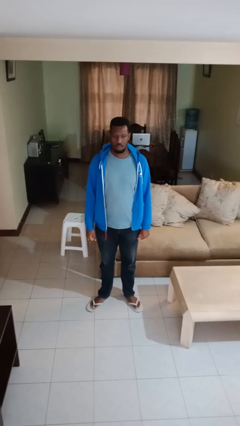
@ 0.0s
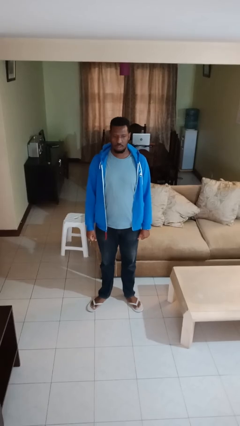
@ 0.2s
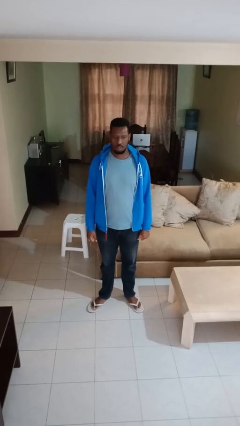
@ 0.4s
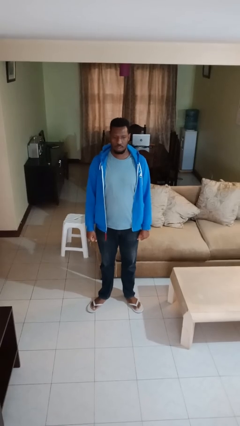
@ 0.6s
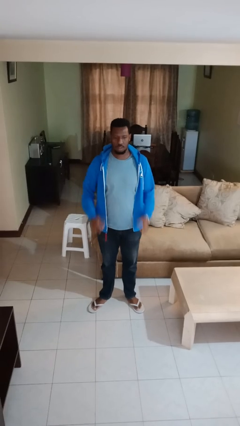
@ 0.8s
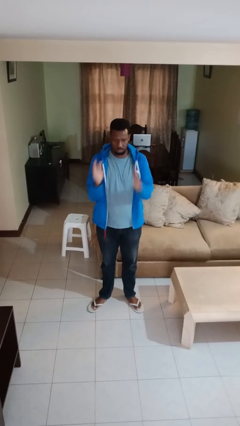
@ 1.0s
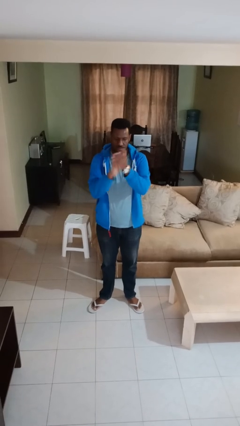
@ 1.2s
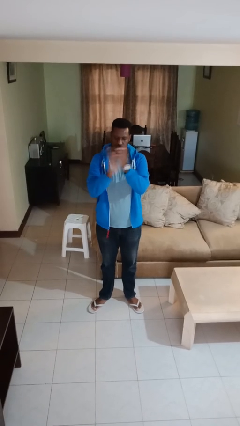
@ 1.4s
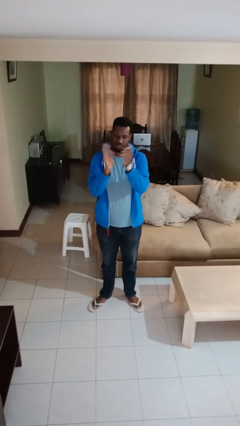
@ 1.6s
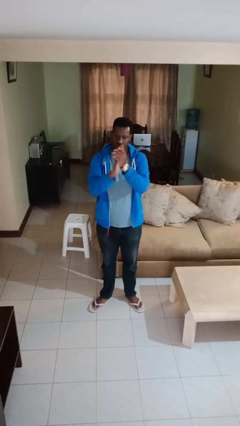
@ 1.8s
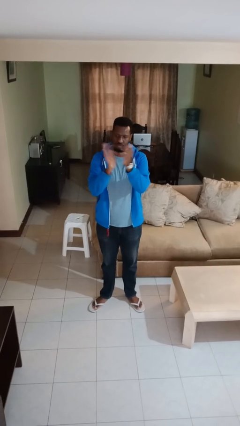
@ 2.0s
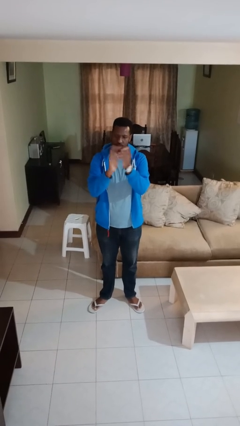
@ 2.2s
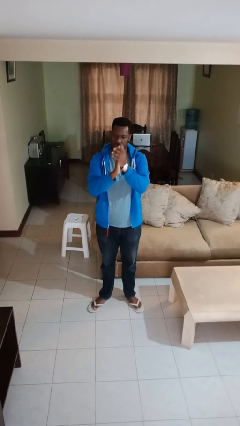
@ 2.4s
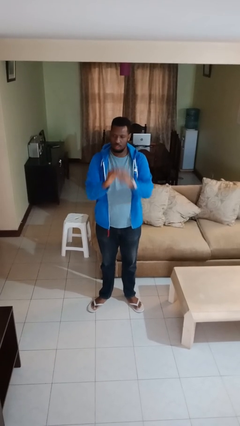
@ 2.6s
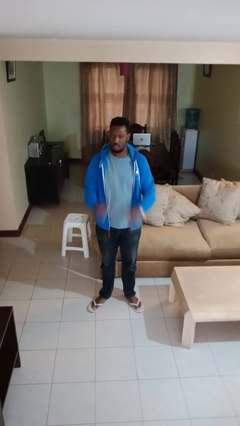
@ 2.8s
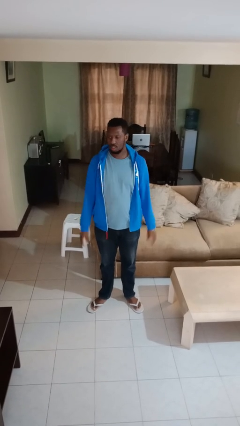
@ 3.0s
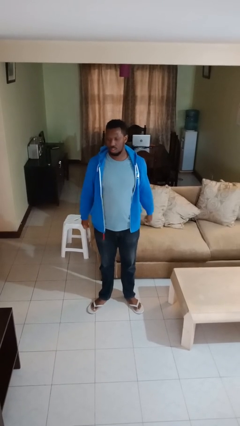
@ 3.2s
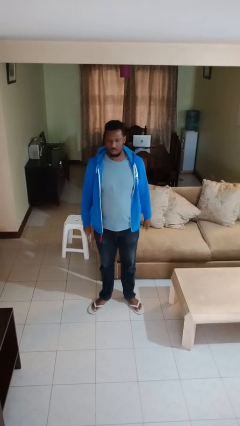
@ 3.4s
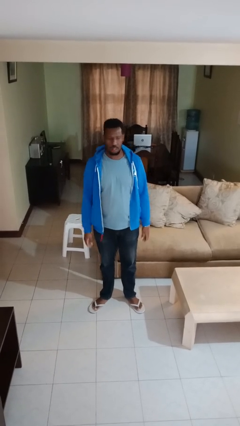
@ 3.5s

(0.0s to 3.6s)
person claps hands

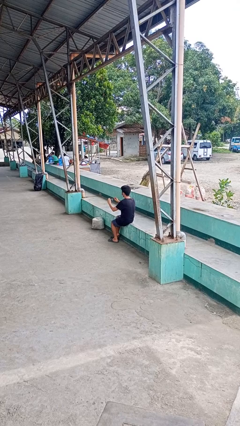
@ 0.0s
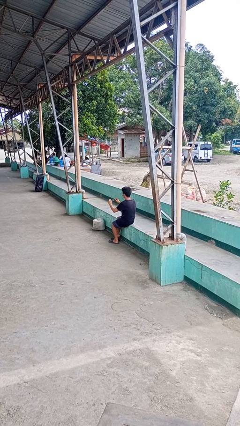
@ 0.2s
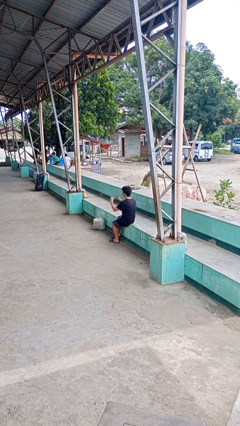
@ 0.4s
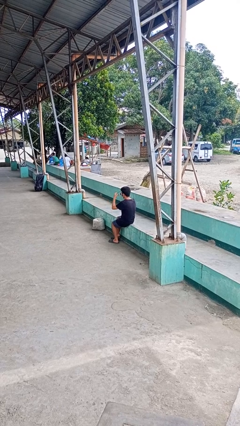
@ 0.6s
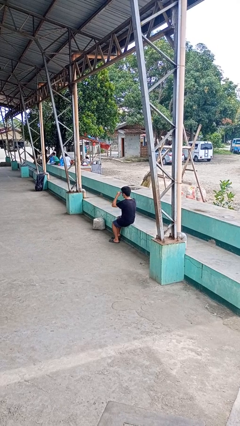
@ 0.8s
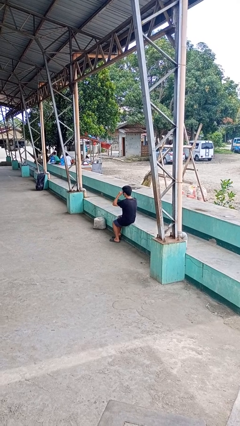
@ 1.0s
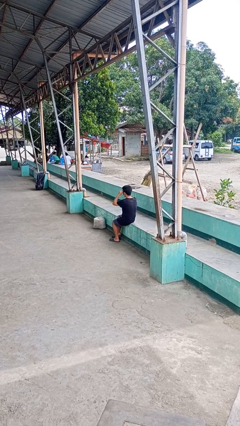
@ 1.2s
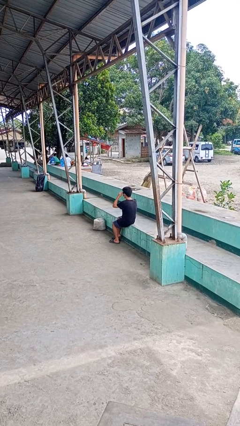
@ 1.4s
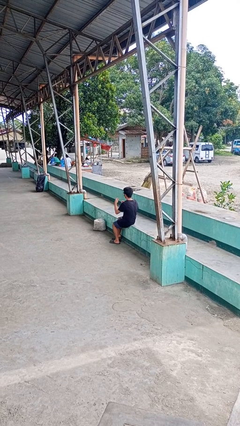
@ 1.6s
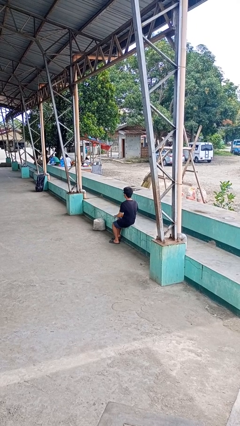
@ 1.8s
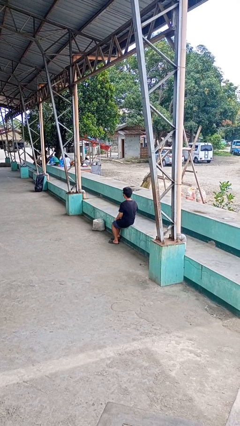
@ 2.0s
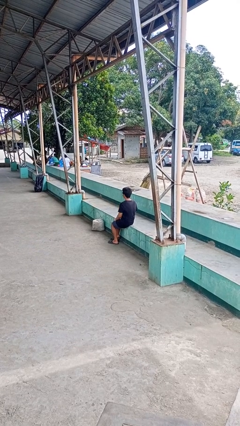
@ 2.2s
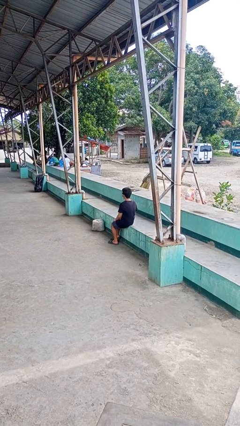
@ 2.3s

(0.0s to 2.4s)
person puts on sunglasses

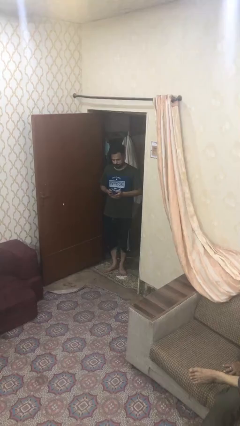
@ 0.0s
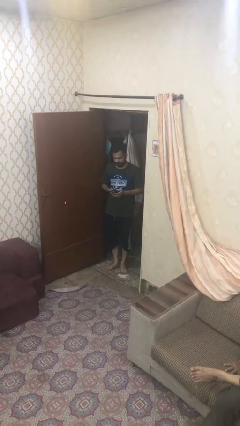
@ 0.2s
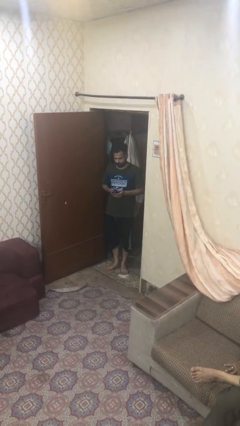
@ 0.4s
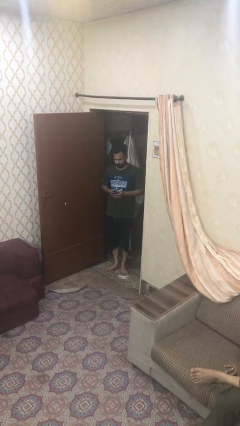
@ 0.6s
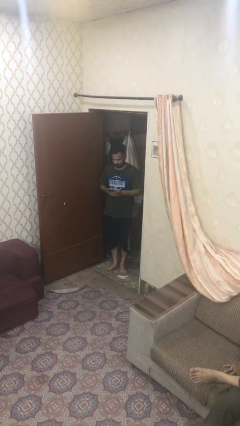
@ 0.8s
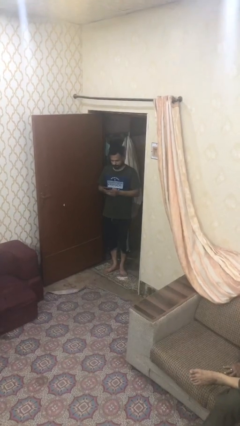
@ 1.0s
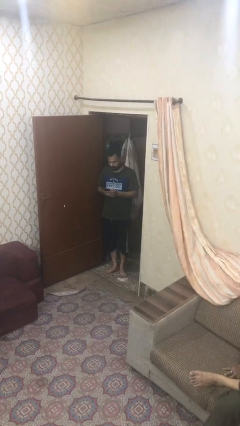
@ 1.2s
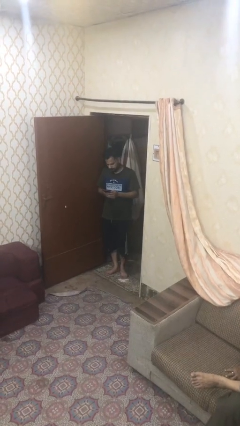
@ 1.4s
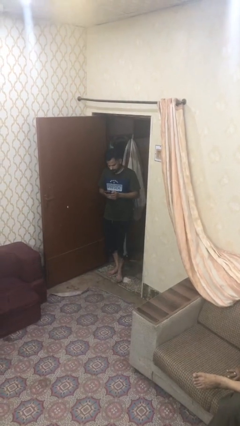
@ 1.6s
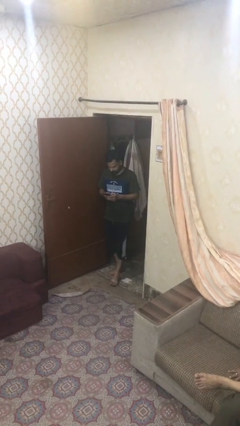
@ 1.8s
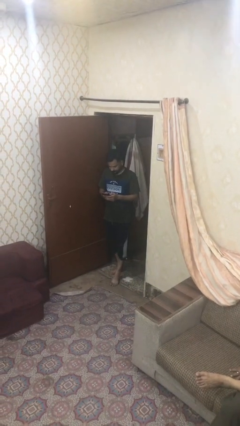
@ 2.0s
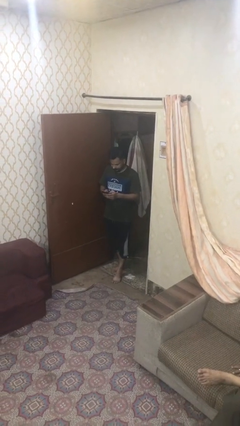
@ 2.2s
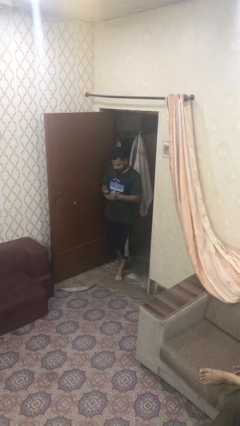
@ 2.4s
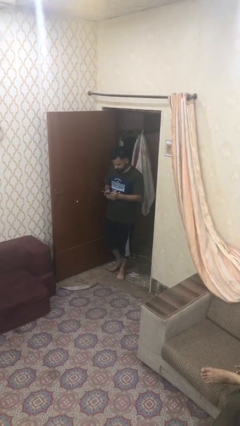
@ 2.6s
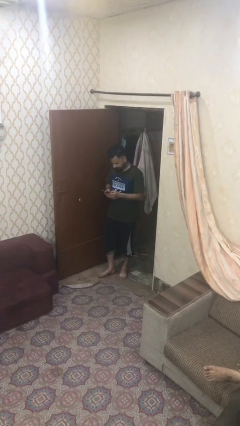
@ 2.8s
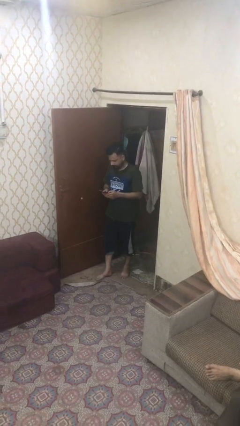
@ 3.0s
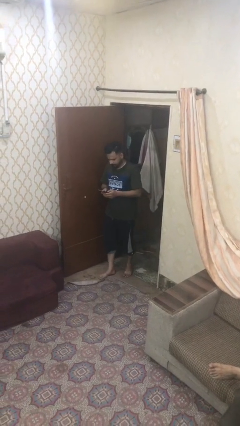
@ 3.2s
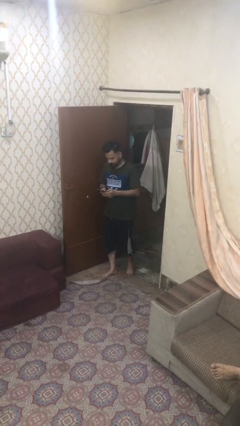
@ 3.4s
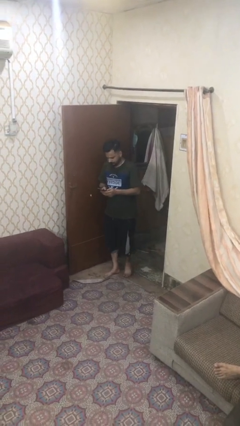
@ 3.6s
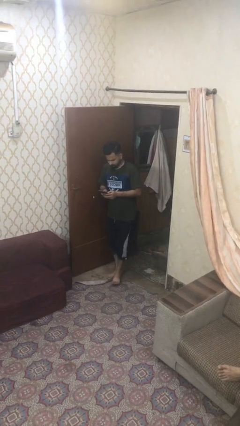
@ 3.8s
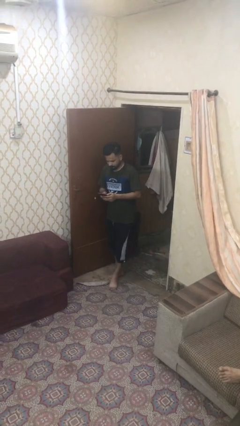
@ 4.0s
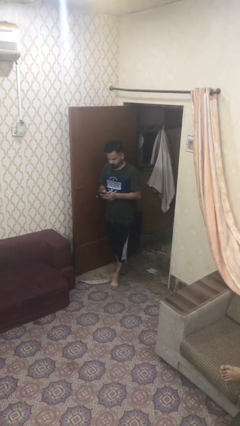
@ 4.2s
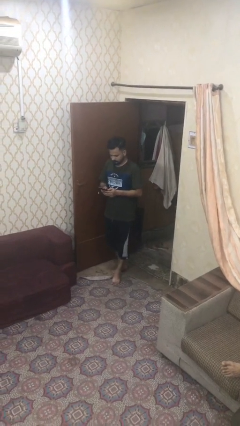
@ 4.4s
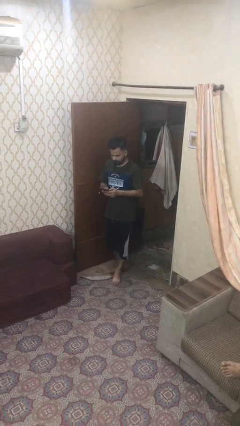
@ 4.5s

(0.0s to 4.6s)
person texts on phone

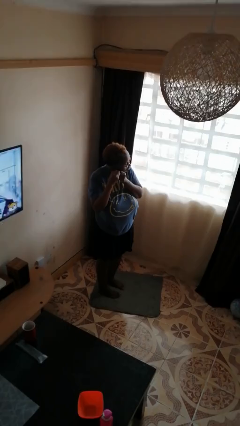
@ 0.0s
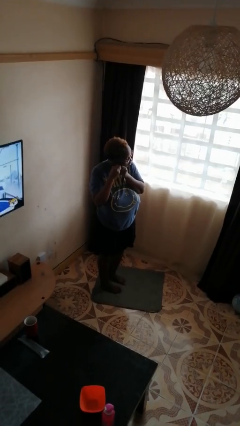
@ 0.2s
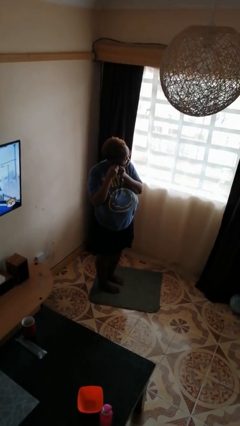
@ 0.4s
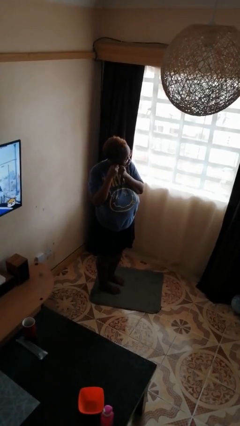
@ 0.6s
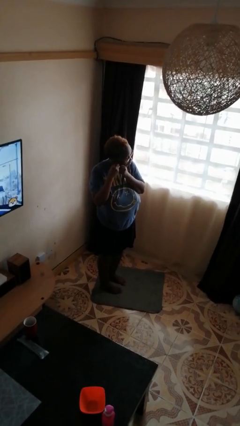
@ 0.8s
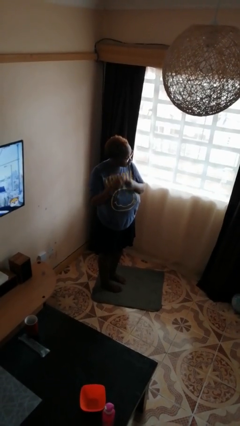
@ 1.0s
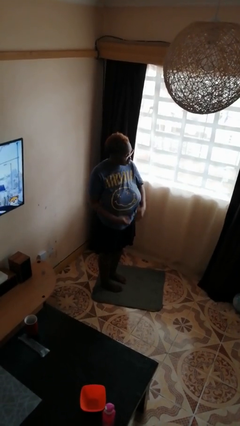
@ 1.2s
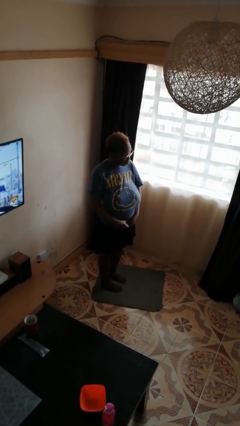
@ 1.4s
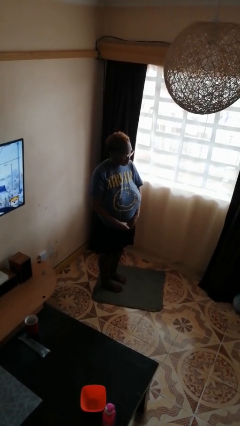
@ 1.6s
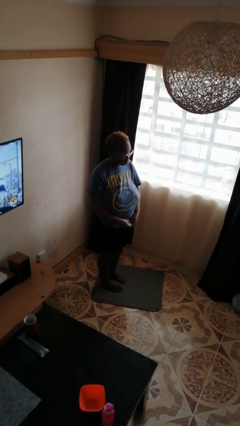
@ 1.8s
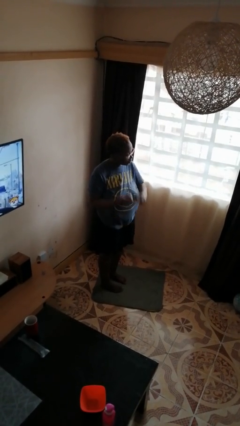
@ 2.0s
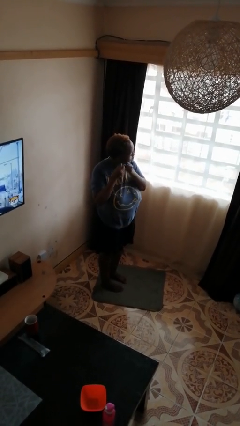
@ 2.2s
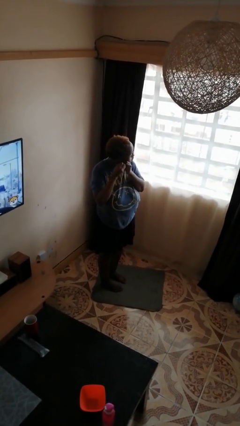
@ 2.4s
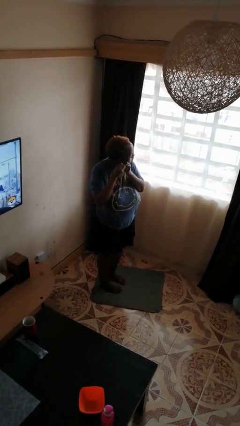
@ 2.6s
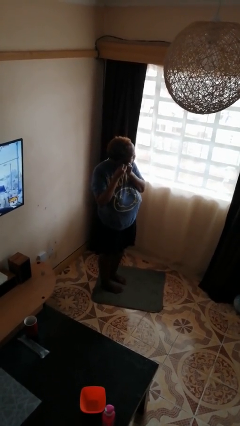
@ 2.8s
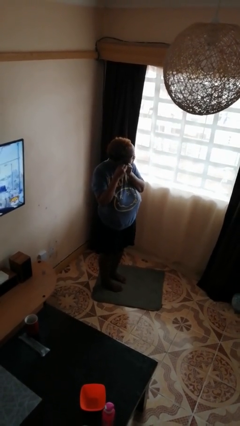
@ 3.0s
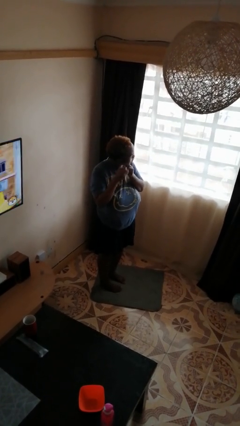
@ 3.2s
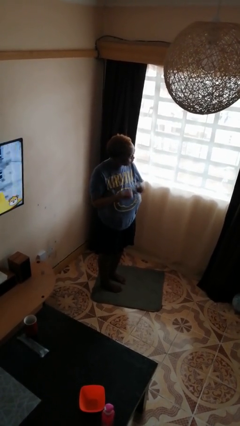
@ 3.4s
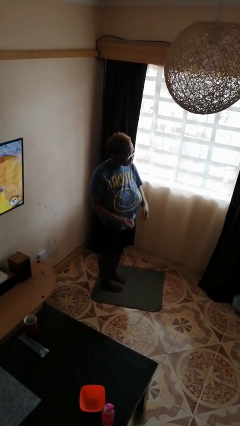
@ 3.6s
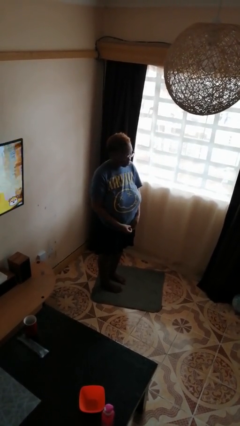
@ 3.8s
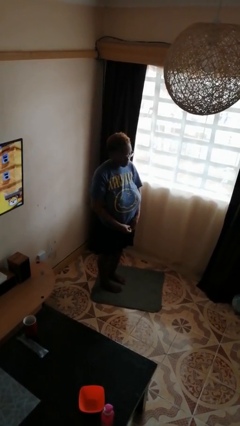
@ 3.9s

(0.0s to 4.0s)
person takes off earrings

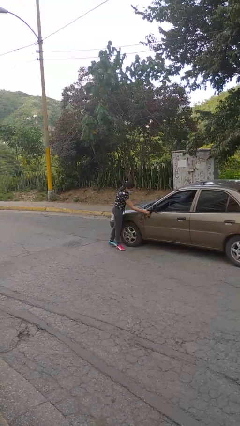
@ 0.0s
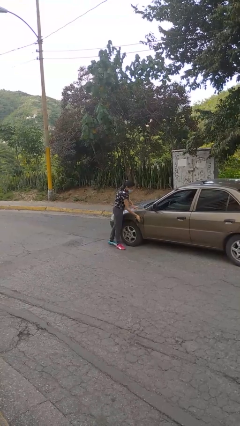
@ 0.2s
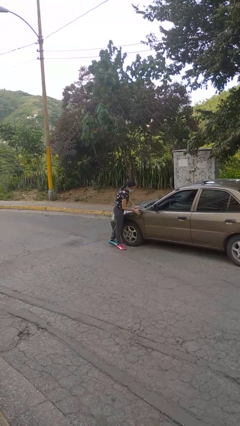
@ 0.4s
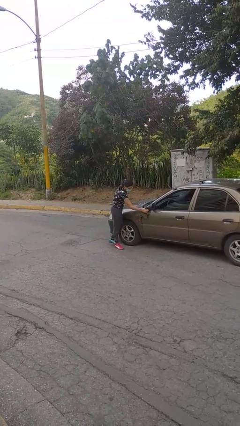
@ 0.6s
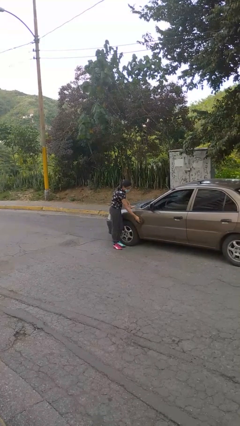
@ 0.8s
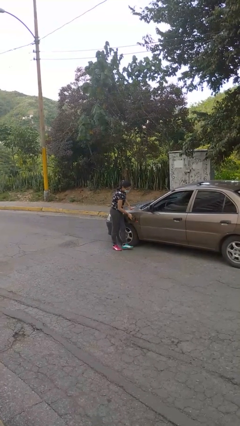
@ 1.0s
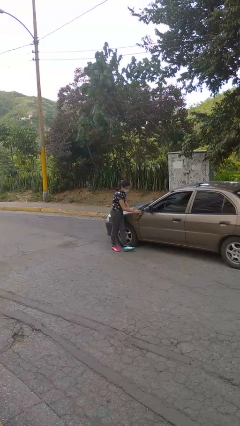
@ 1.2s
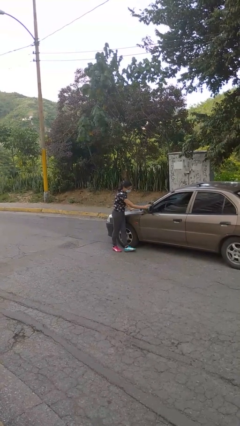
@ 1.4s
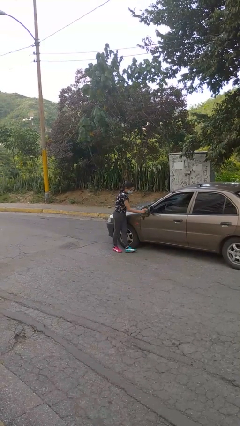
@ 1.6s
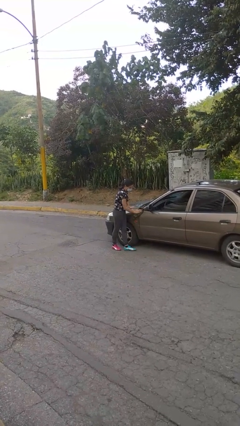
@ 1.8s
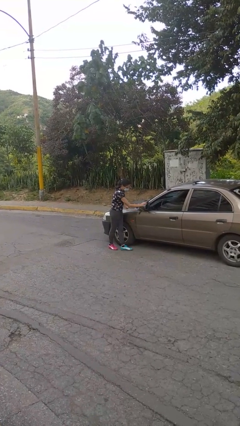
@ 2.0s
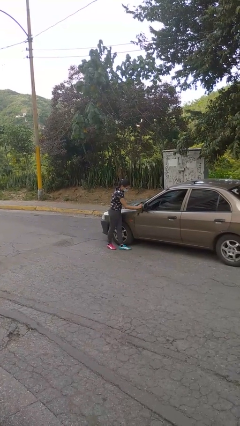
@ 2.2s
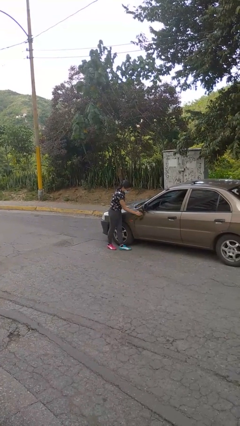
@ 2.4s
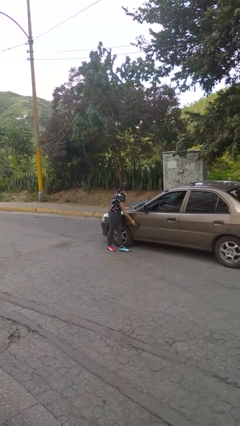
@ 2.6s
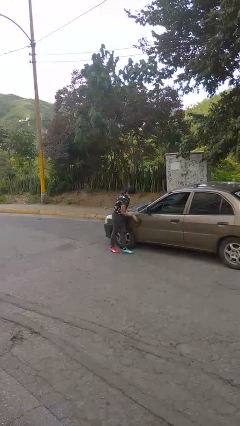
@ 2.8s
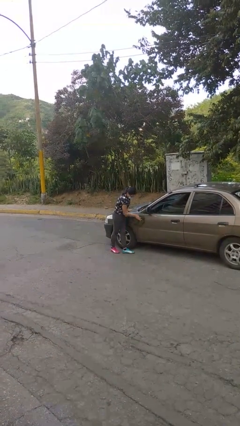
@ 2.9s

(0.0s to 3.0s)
person polishes car with rag
